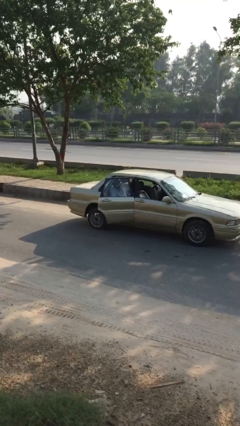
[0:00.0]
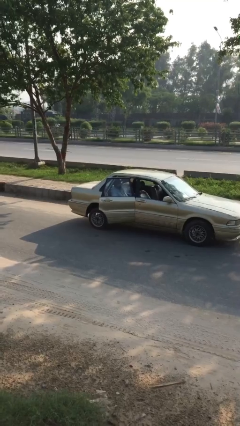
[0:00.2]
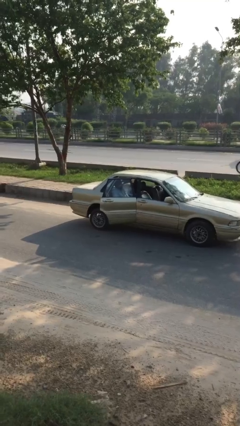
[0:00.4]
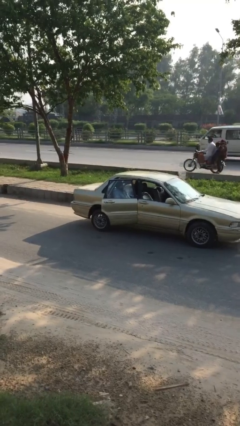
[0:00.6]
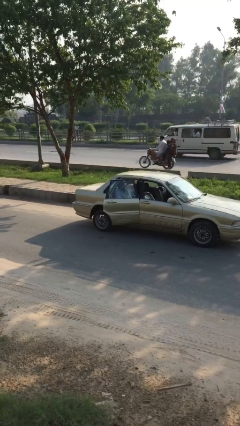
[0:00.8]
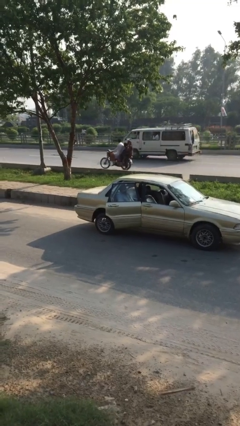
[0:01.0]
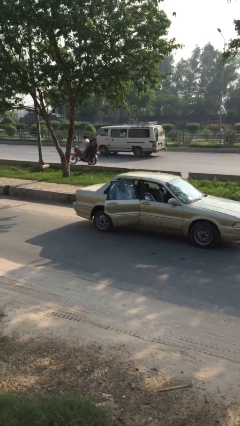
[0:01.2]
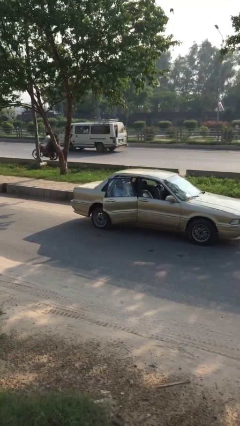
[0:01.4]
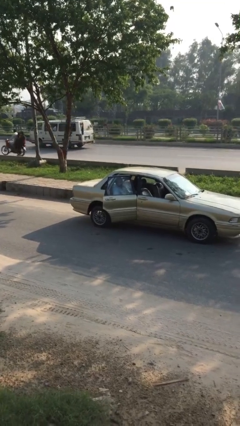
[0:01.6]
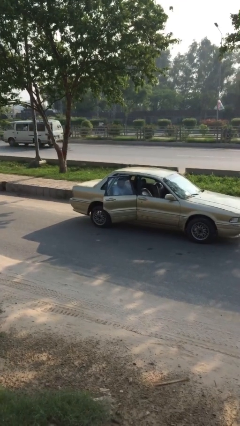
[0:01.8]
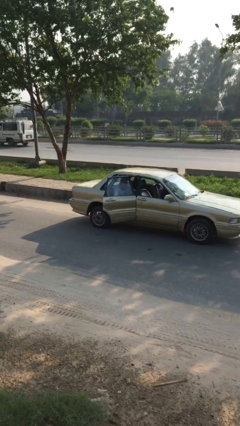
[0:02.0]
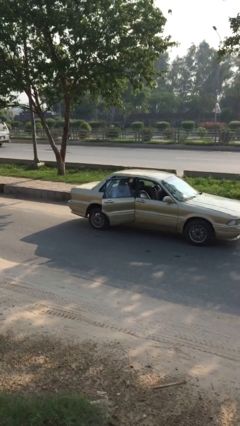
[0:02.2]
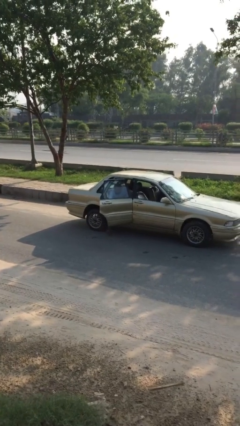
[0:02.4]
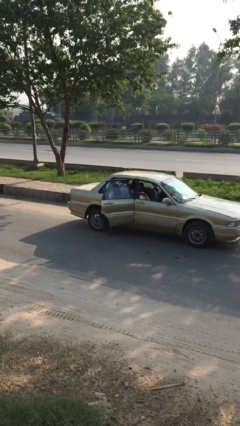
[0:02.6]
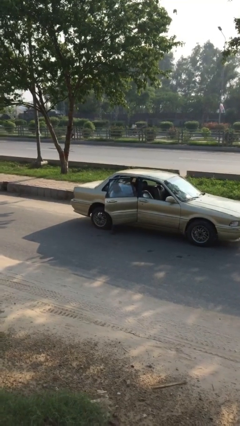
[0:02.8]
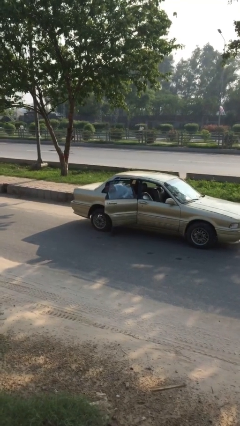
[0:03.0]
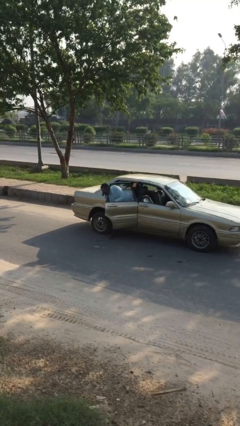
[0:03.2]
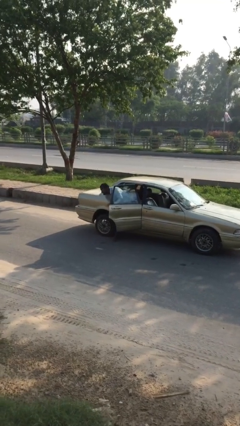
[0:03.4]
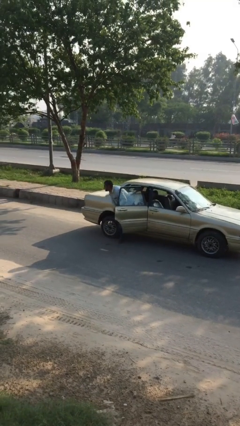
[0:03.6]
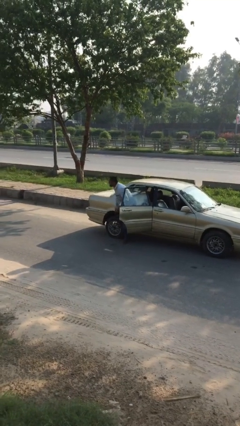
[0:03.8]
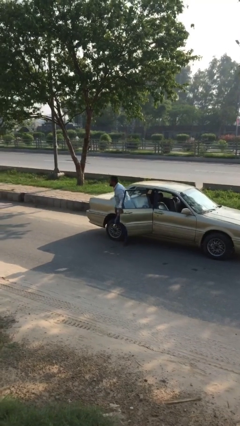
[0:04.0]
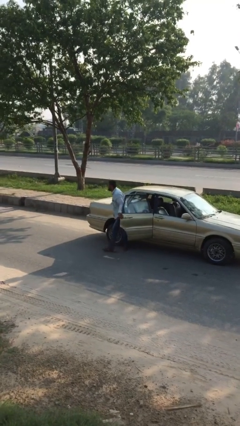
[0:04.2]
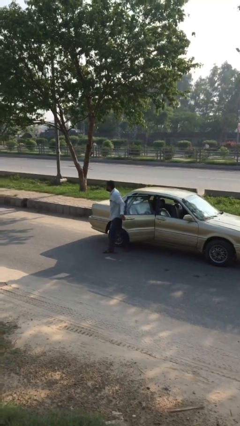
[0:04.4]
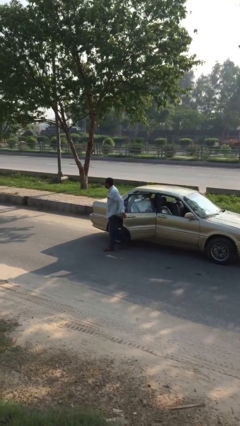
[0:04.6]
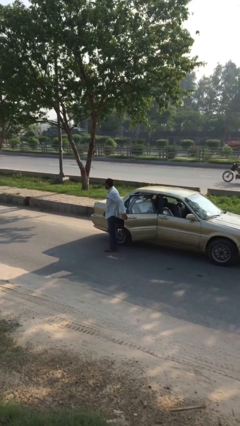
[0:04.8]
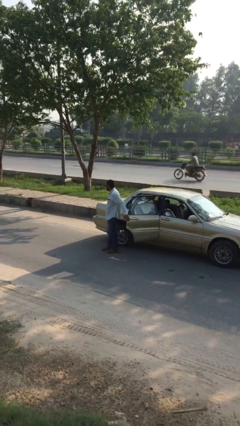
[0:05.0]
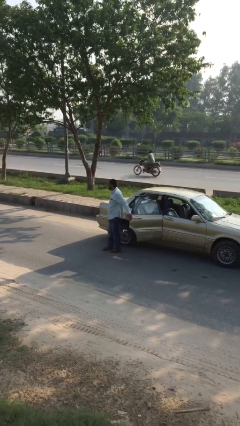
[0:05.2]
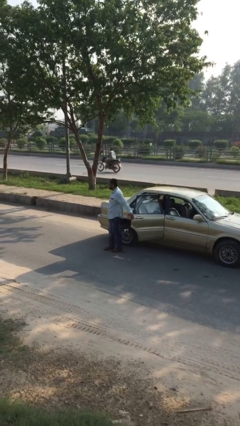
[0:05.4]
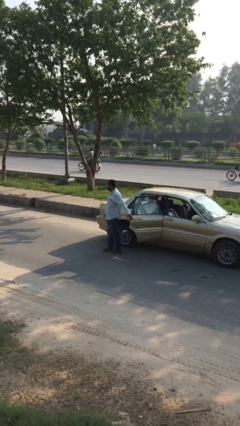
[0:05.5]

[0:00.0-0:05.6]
person exits car

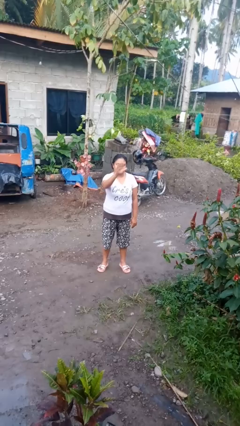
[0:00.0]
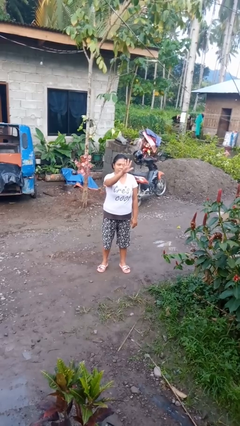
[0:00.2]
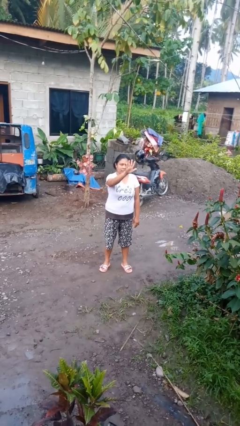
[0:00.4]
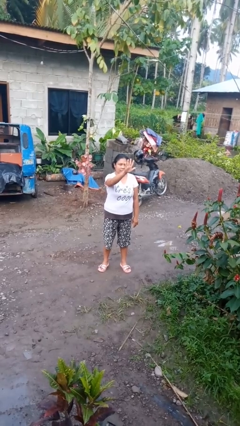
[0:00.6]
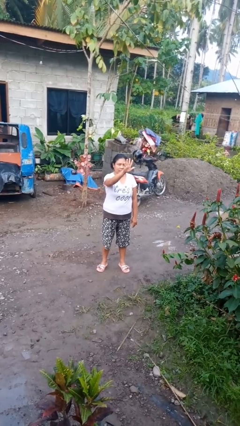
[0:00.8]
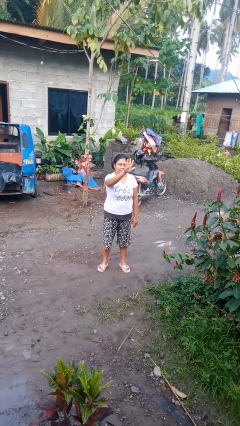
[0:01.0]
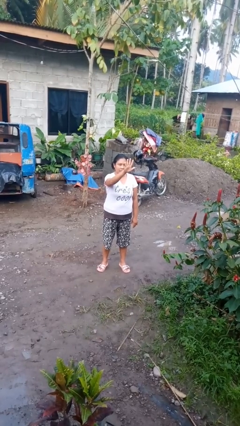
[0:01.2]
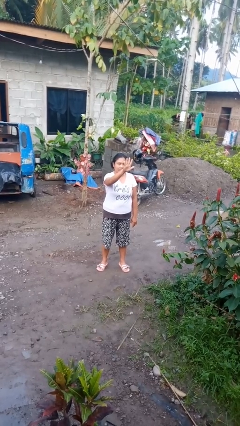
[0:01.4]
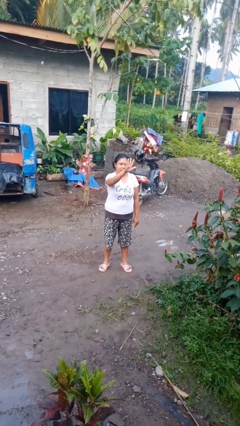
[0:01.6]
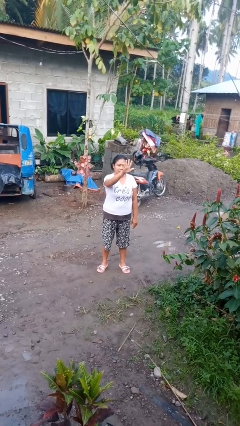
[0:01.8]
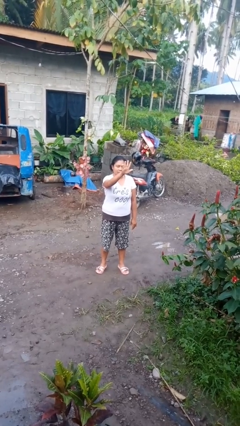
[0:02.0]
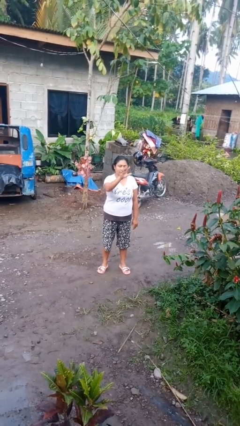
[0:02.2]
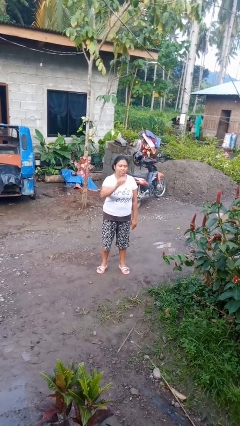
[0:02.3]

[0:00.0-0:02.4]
person gestures number five

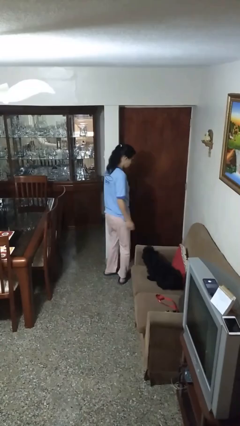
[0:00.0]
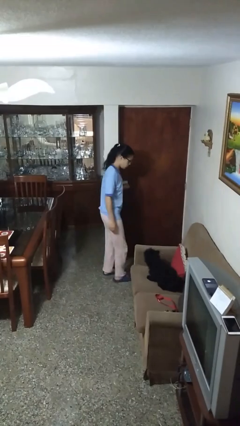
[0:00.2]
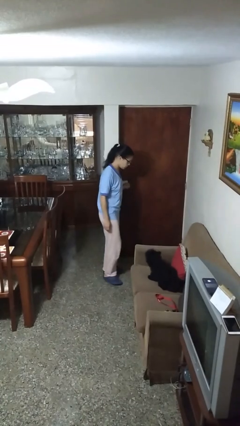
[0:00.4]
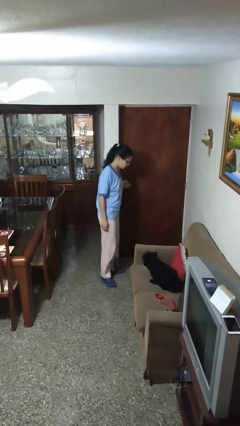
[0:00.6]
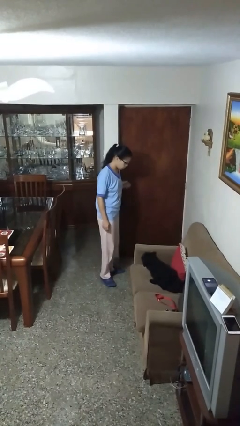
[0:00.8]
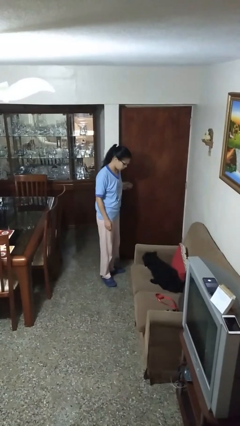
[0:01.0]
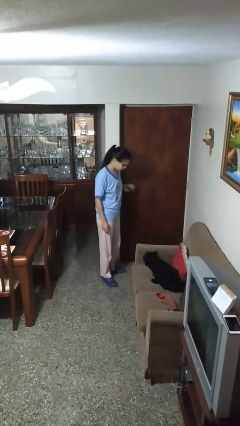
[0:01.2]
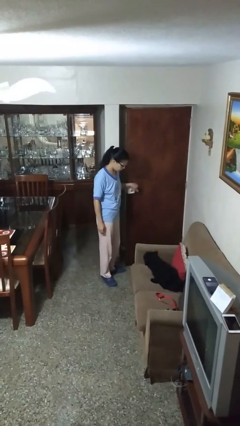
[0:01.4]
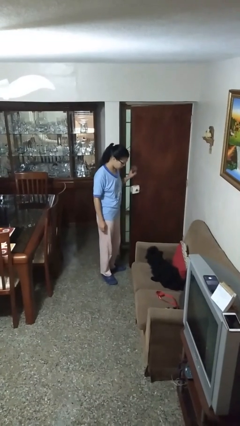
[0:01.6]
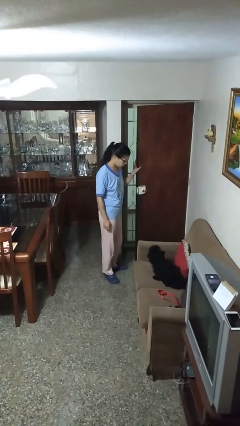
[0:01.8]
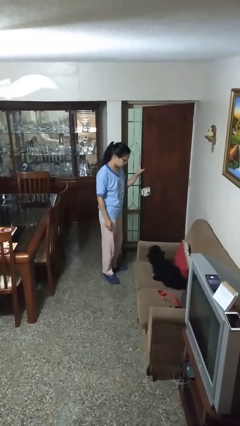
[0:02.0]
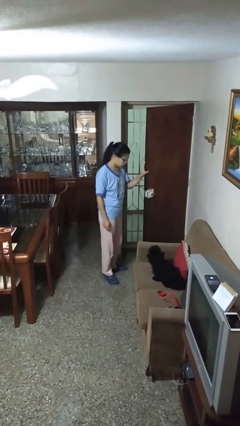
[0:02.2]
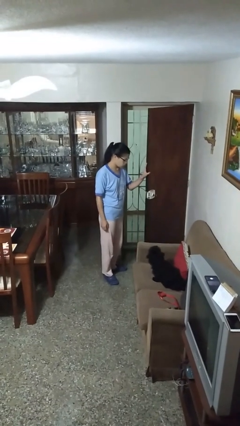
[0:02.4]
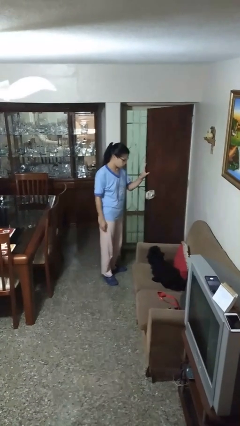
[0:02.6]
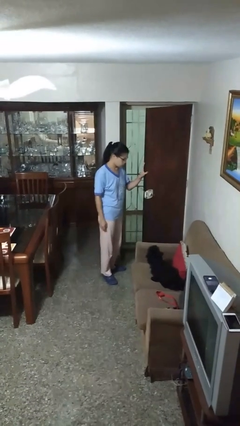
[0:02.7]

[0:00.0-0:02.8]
person opens facility door

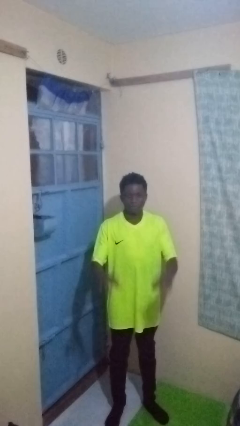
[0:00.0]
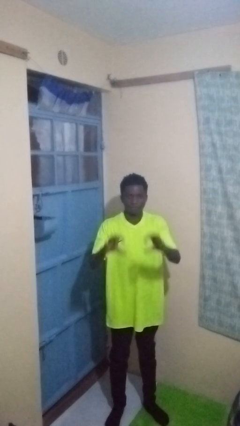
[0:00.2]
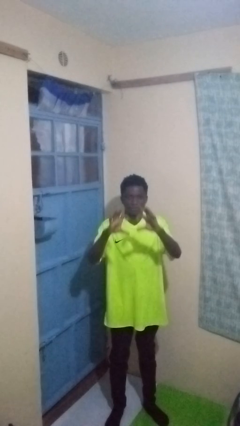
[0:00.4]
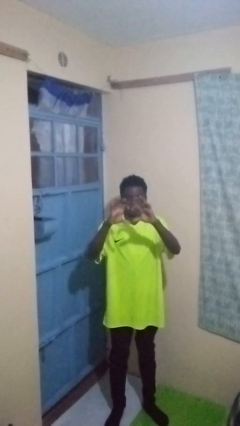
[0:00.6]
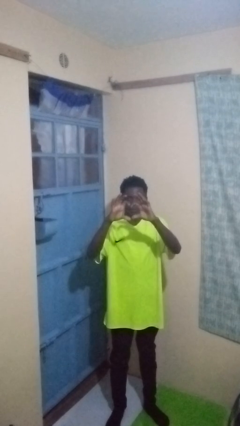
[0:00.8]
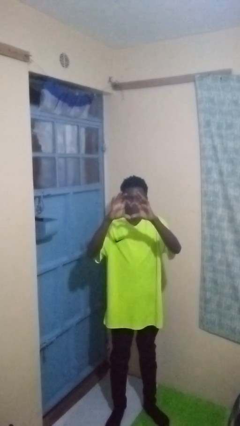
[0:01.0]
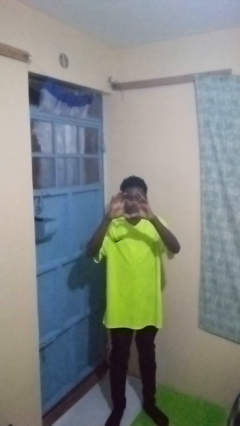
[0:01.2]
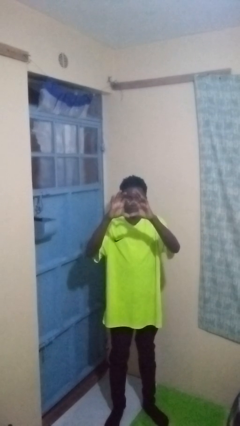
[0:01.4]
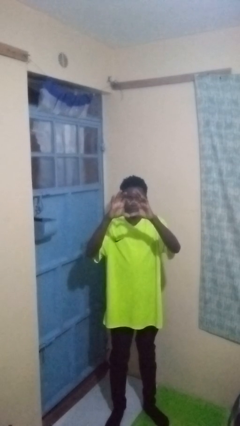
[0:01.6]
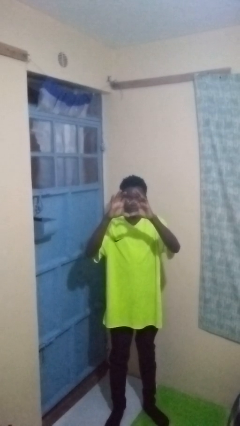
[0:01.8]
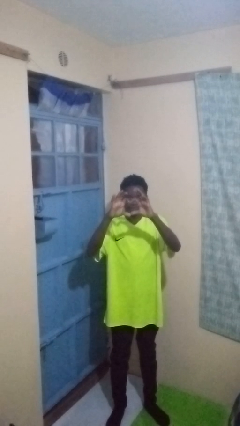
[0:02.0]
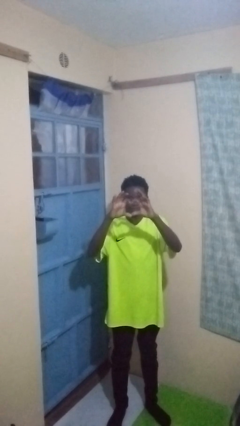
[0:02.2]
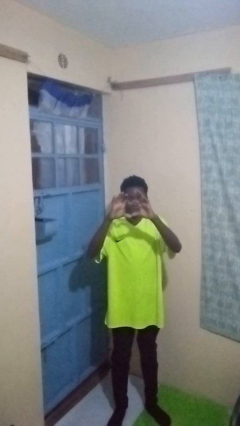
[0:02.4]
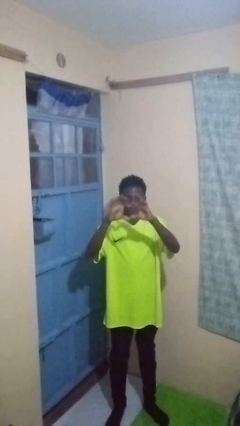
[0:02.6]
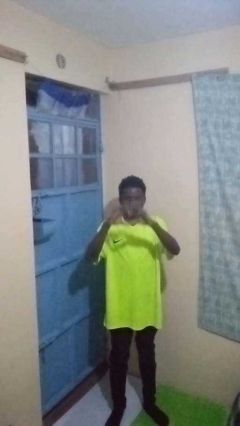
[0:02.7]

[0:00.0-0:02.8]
person gestures heart

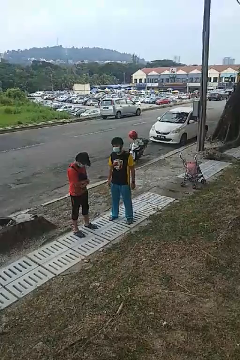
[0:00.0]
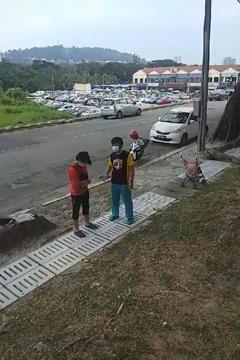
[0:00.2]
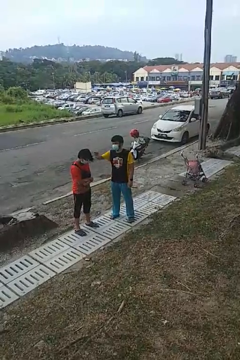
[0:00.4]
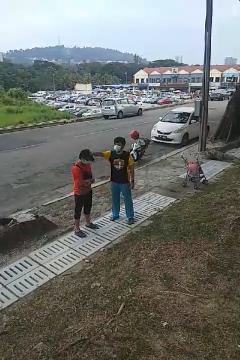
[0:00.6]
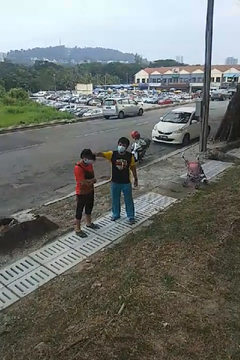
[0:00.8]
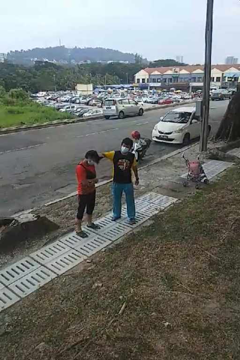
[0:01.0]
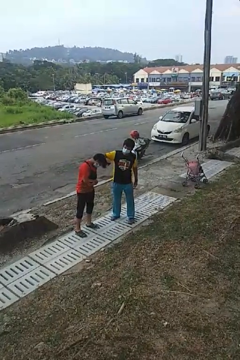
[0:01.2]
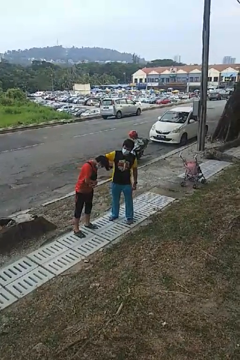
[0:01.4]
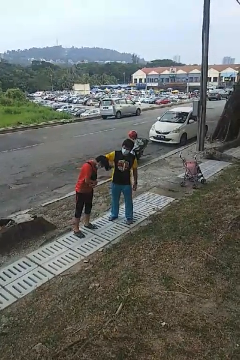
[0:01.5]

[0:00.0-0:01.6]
person grabs person by hair

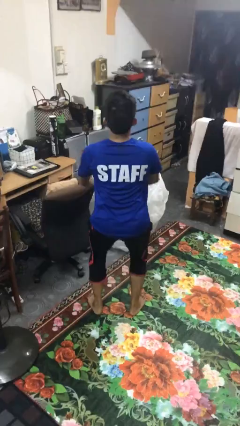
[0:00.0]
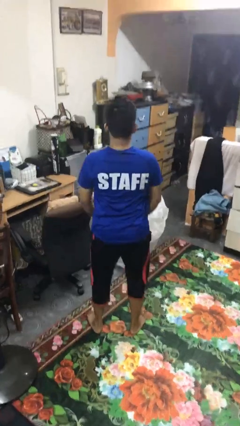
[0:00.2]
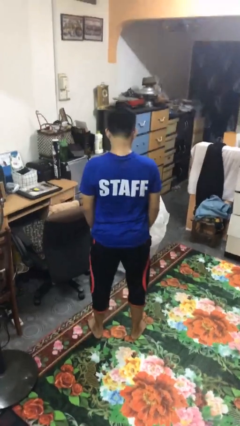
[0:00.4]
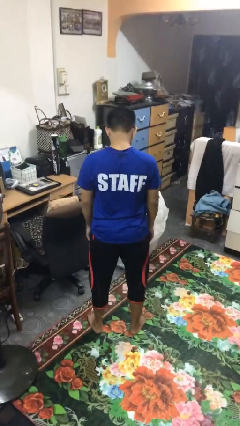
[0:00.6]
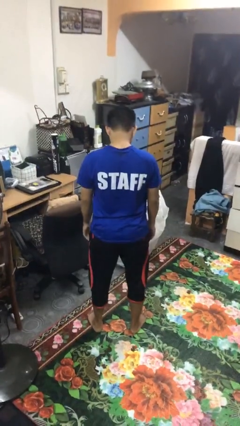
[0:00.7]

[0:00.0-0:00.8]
person stands up

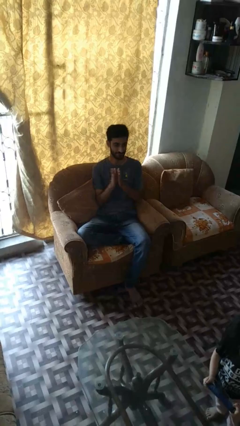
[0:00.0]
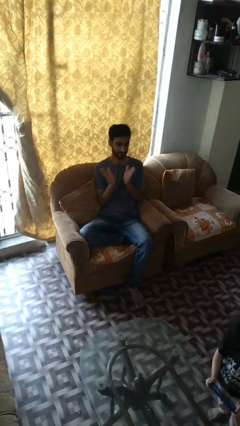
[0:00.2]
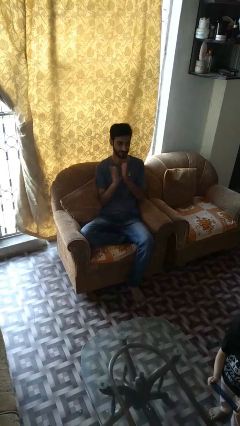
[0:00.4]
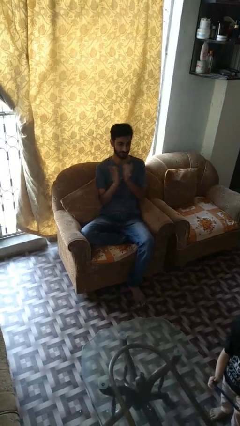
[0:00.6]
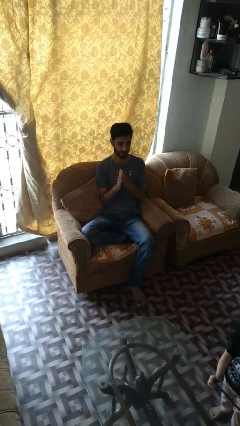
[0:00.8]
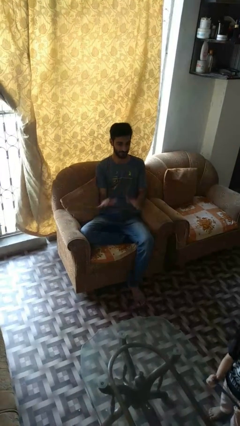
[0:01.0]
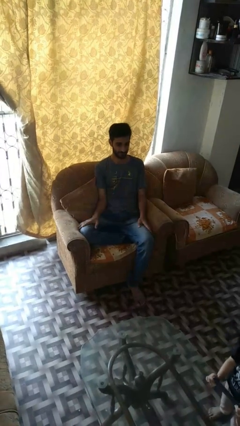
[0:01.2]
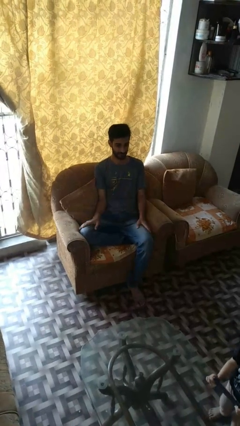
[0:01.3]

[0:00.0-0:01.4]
person claps hands
